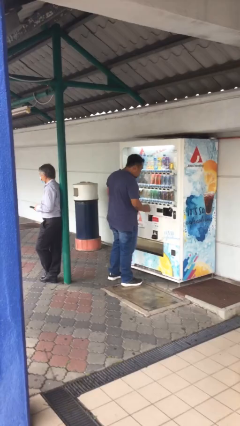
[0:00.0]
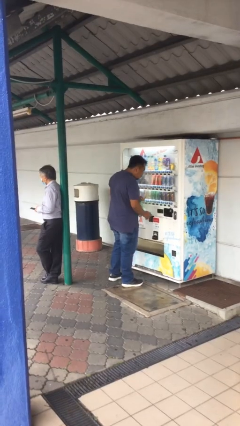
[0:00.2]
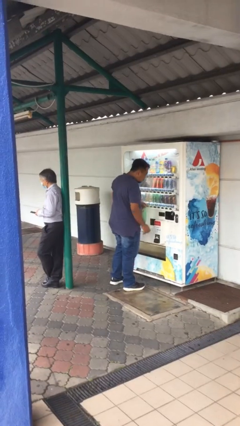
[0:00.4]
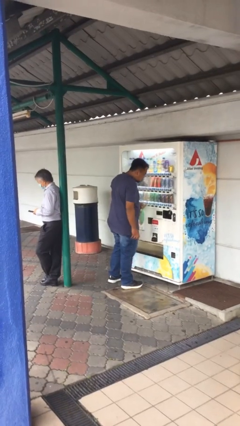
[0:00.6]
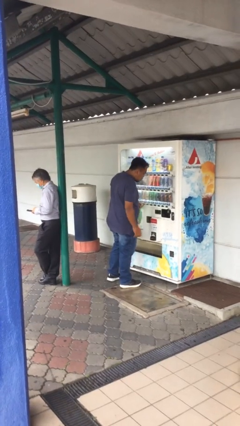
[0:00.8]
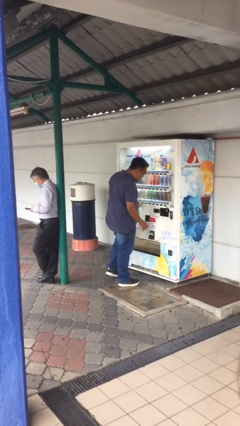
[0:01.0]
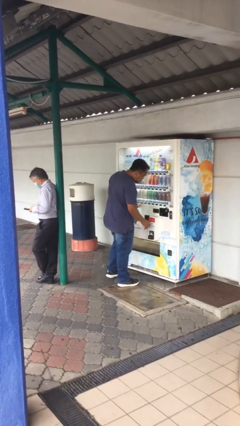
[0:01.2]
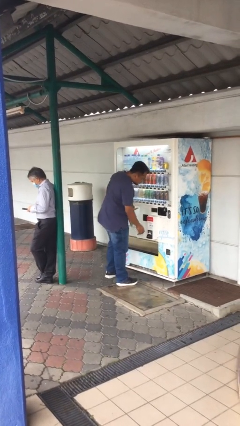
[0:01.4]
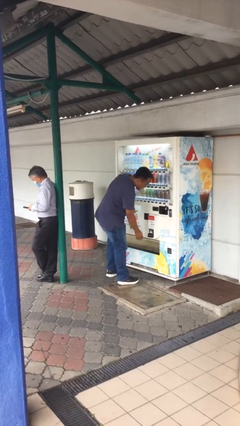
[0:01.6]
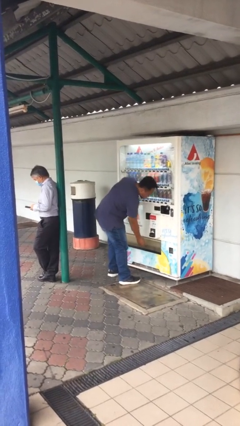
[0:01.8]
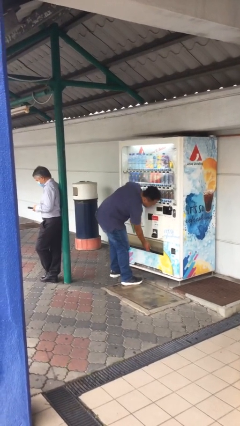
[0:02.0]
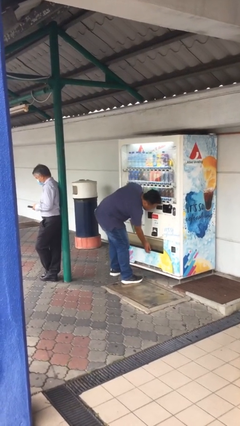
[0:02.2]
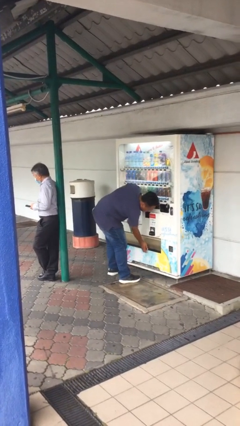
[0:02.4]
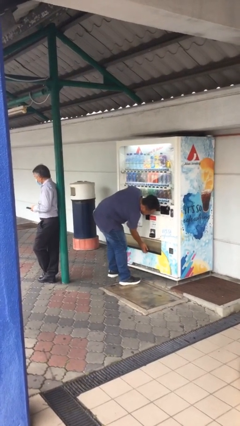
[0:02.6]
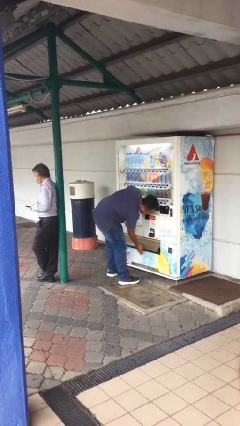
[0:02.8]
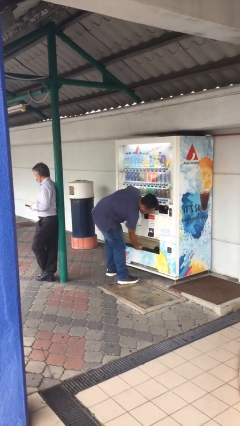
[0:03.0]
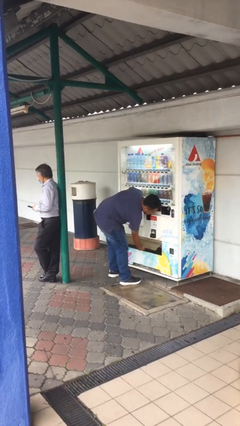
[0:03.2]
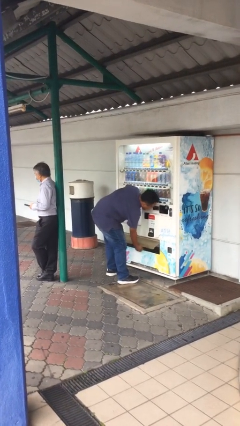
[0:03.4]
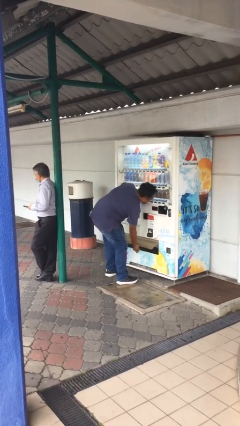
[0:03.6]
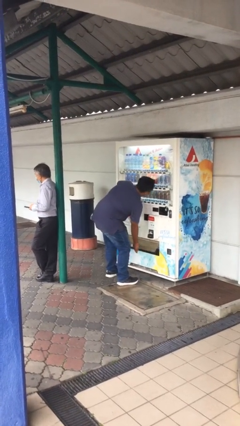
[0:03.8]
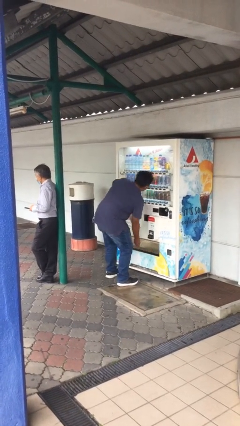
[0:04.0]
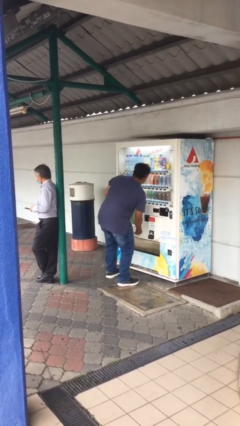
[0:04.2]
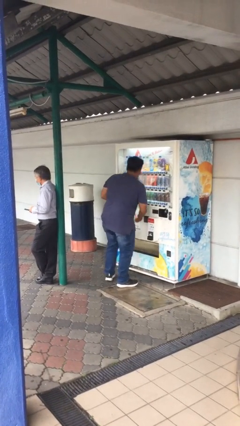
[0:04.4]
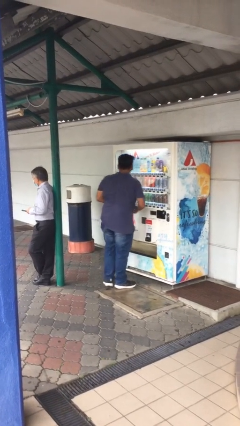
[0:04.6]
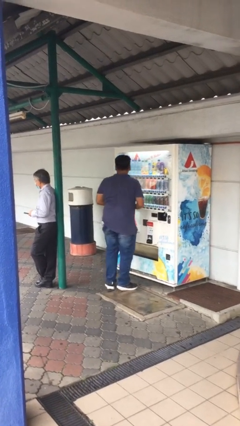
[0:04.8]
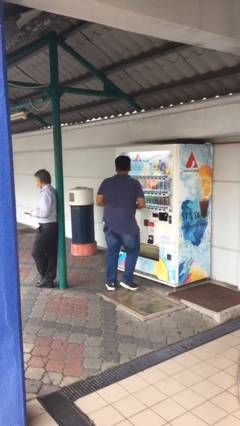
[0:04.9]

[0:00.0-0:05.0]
person purchases from machine

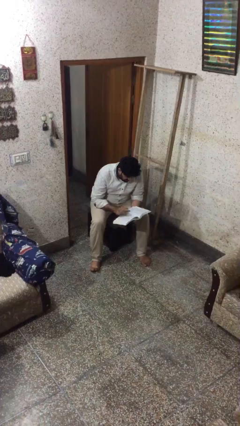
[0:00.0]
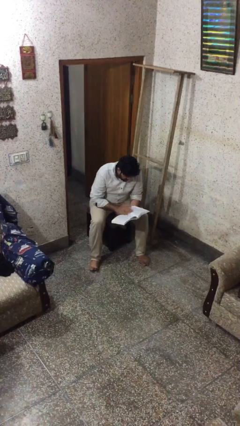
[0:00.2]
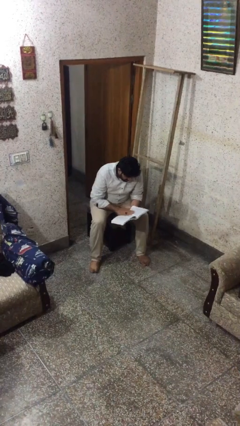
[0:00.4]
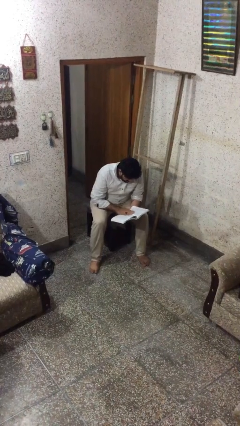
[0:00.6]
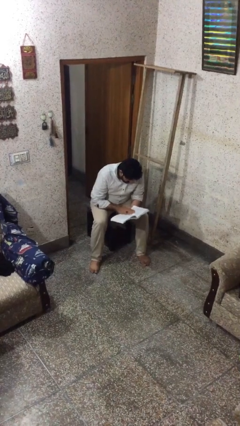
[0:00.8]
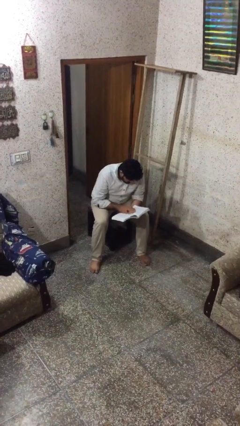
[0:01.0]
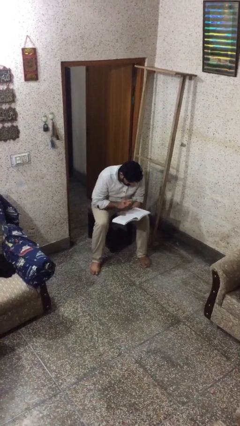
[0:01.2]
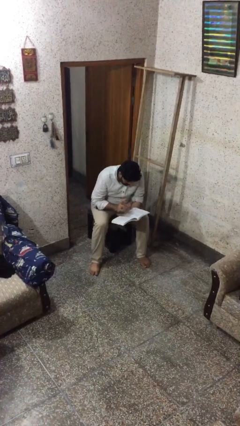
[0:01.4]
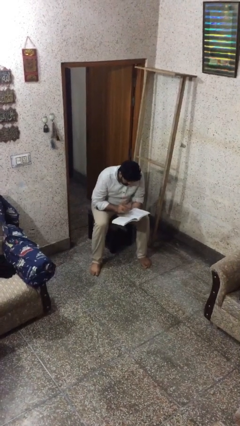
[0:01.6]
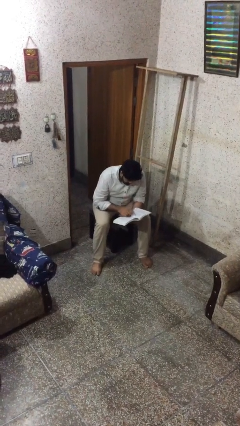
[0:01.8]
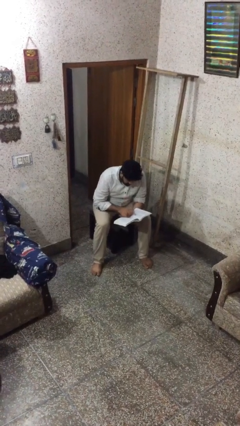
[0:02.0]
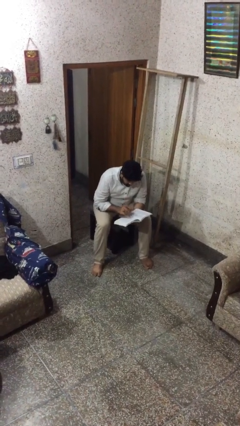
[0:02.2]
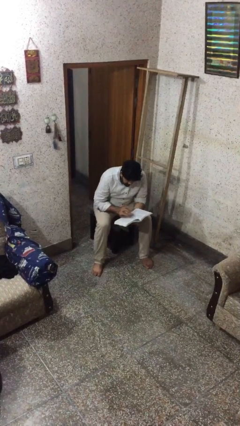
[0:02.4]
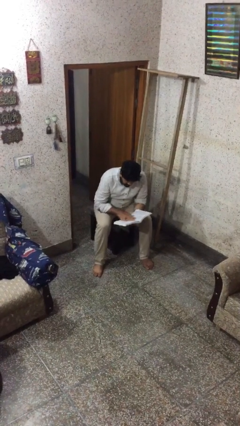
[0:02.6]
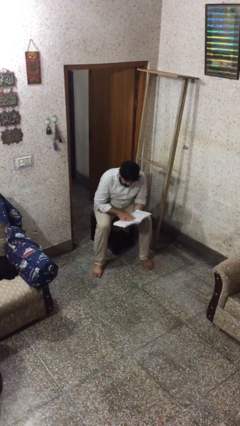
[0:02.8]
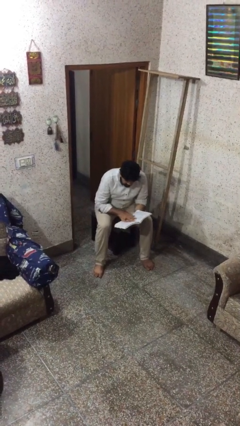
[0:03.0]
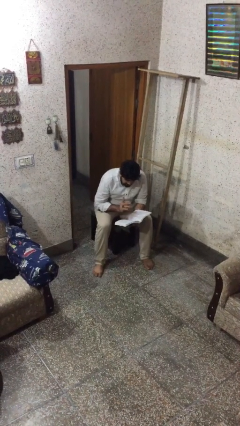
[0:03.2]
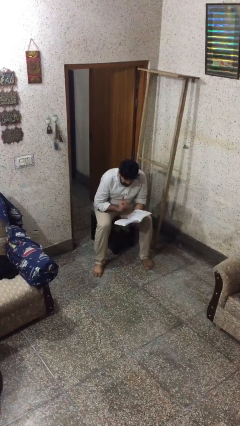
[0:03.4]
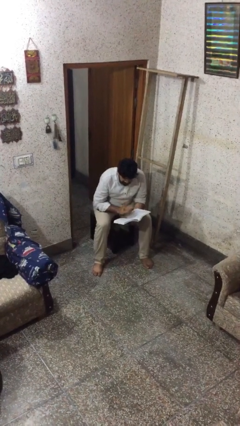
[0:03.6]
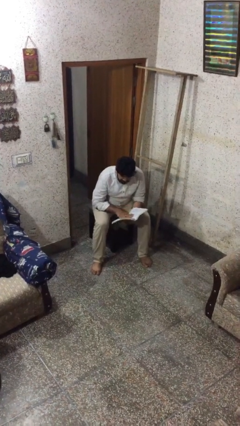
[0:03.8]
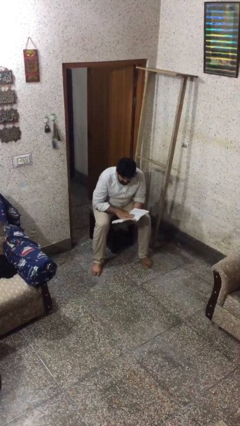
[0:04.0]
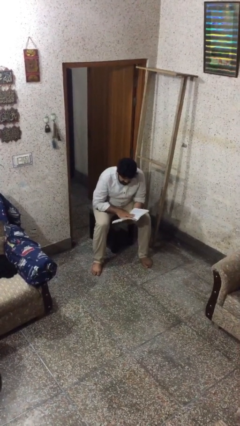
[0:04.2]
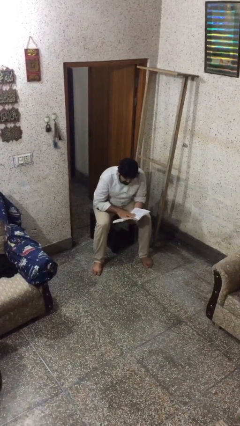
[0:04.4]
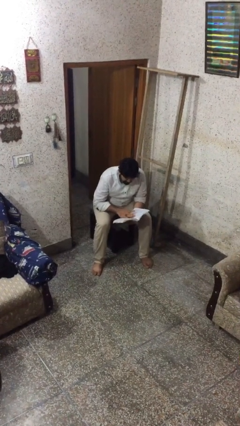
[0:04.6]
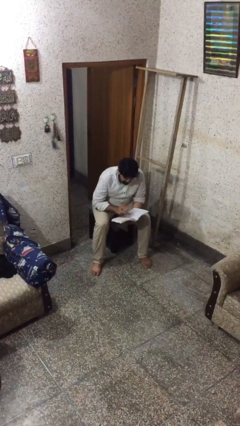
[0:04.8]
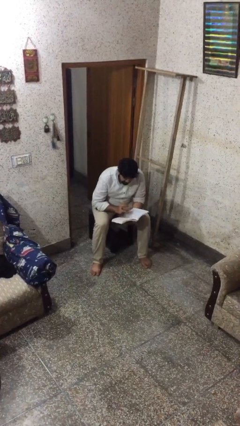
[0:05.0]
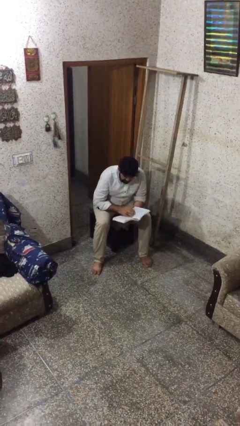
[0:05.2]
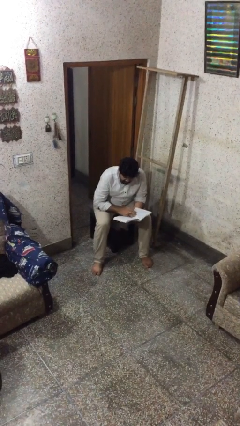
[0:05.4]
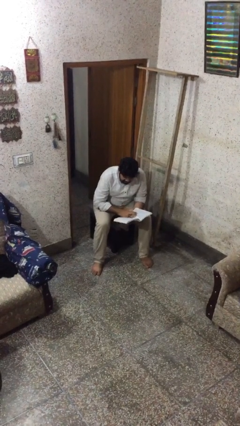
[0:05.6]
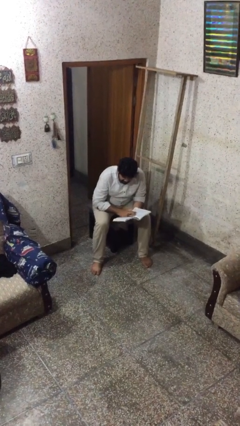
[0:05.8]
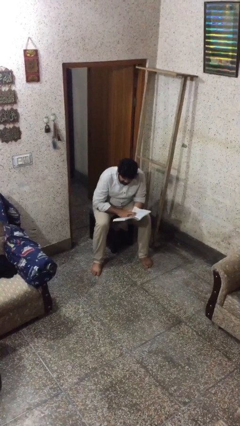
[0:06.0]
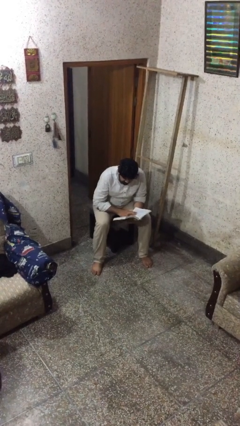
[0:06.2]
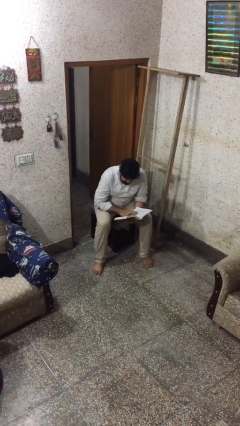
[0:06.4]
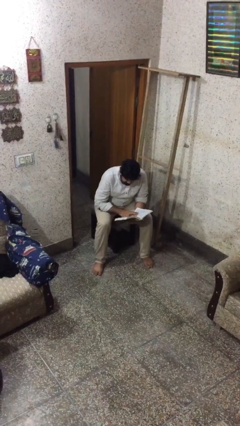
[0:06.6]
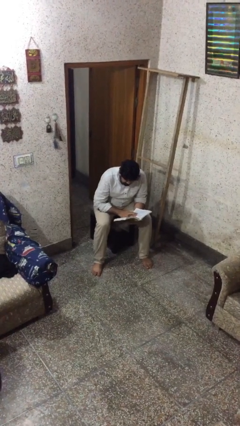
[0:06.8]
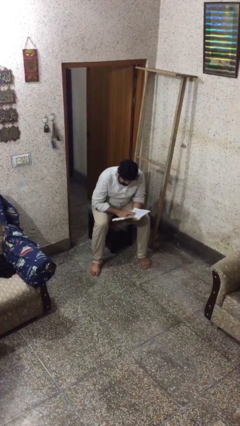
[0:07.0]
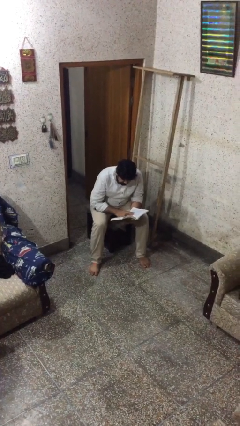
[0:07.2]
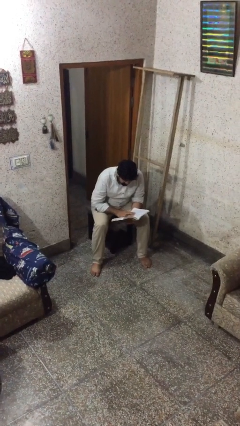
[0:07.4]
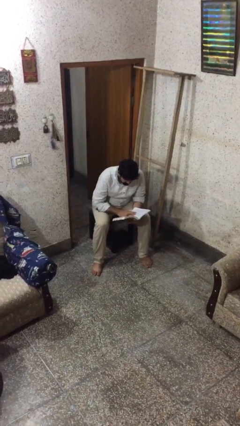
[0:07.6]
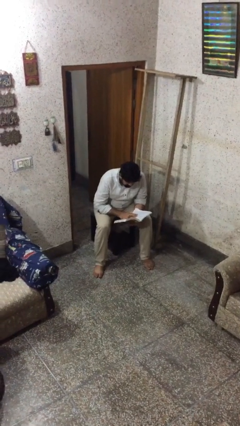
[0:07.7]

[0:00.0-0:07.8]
person reads document

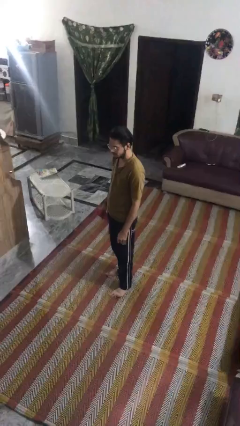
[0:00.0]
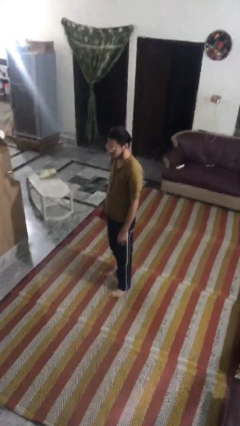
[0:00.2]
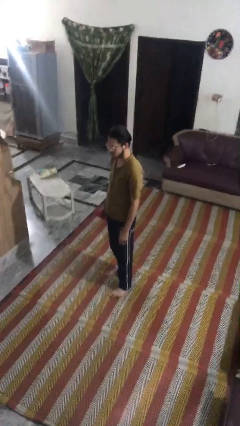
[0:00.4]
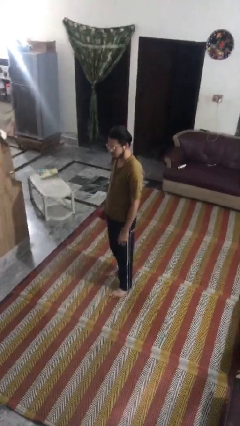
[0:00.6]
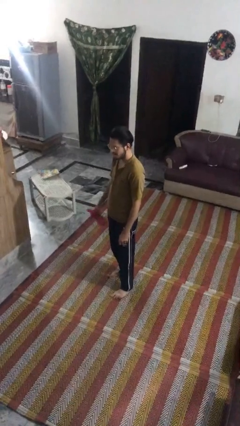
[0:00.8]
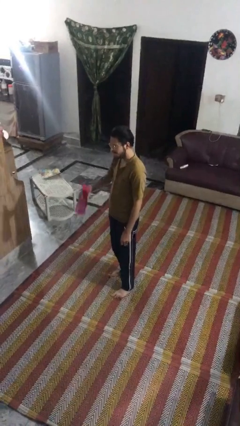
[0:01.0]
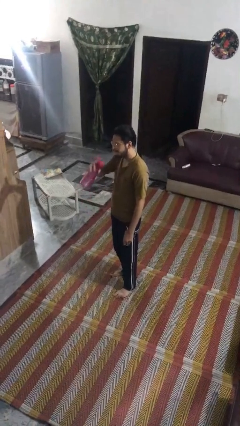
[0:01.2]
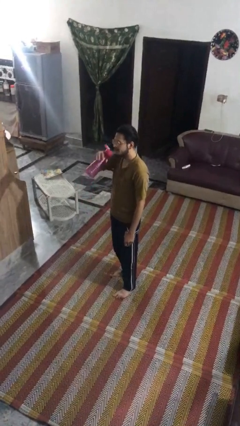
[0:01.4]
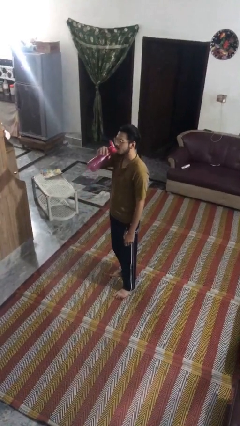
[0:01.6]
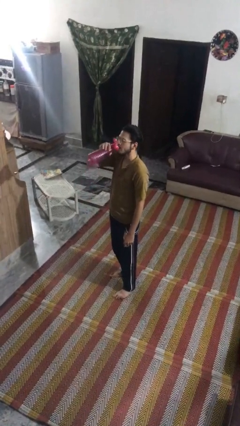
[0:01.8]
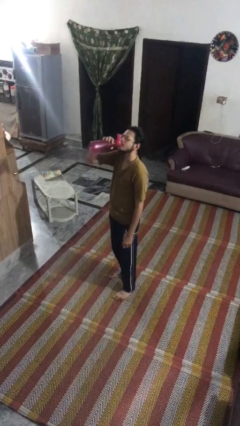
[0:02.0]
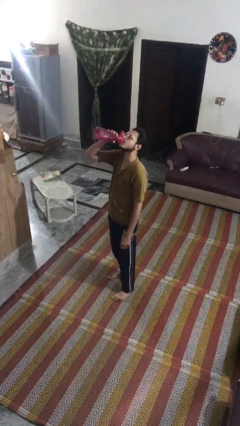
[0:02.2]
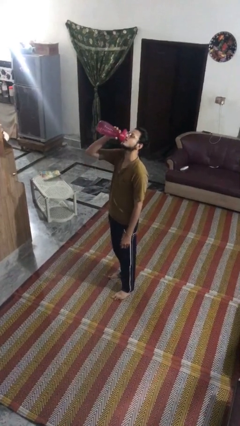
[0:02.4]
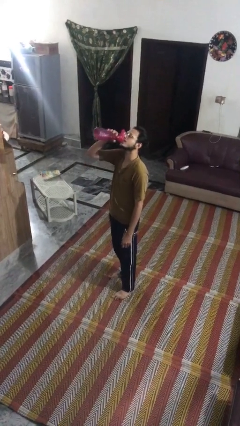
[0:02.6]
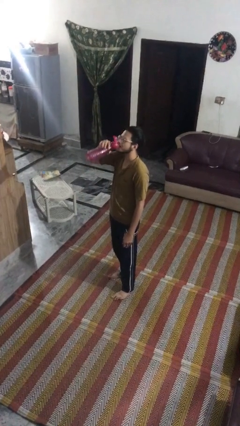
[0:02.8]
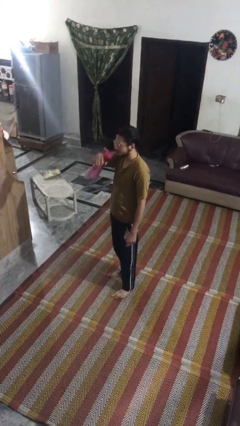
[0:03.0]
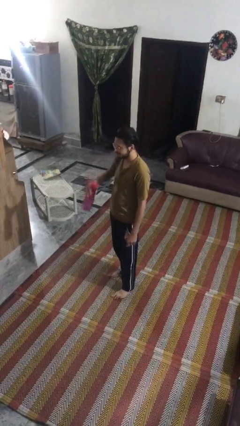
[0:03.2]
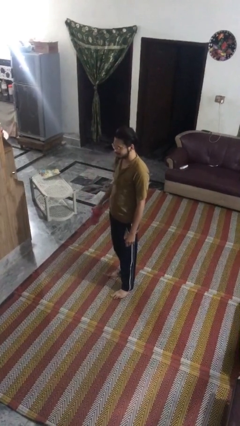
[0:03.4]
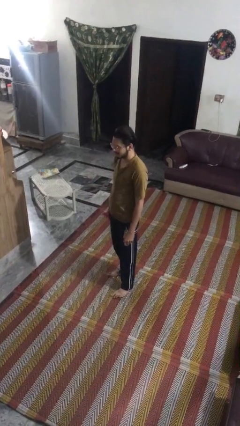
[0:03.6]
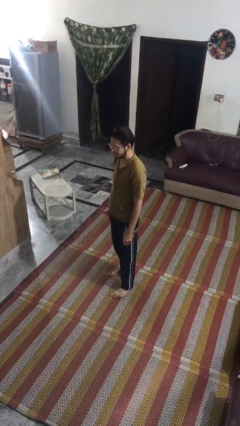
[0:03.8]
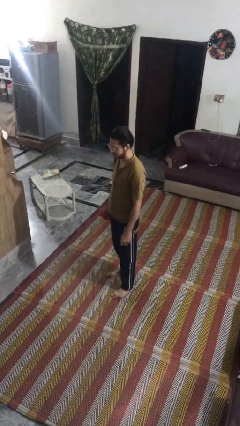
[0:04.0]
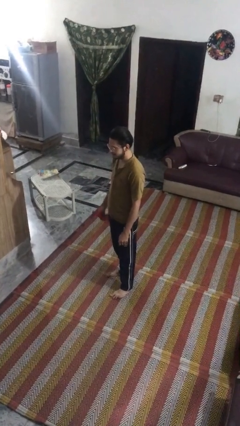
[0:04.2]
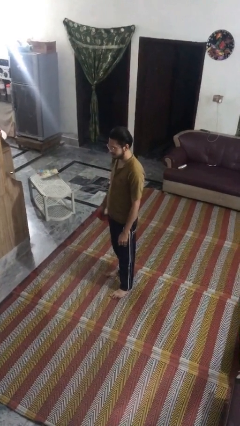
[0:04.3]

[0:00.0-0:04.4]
person drinks from bottle

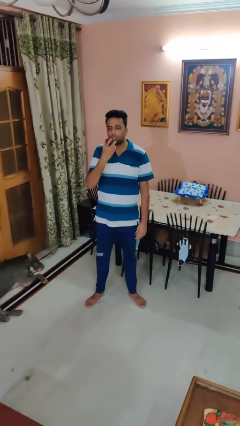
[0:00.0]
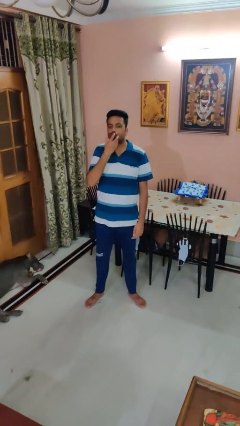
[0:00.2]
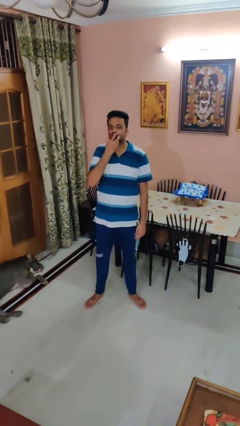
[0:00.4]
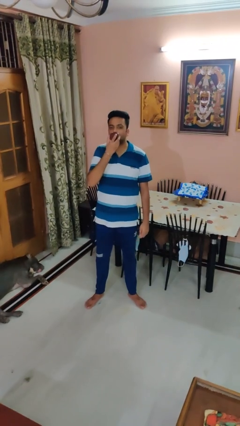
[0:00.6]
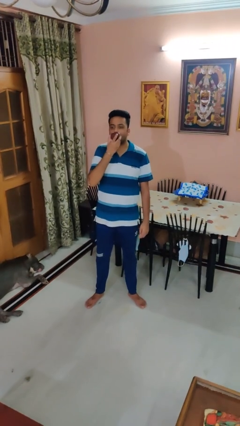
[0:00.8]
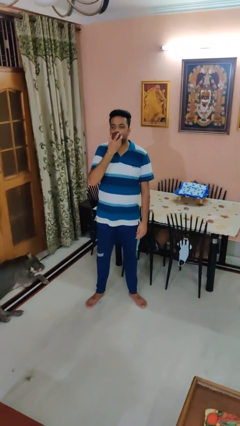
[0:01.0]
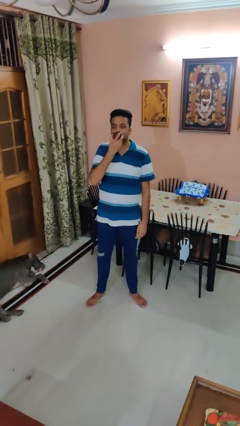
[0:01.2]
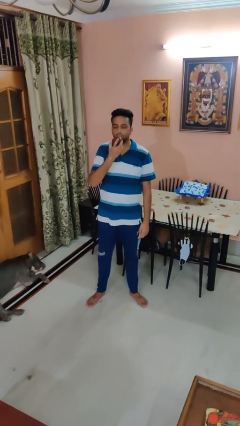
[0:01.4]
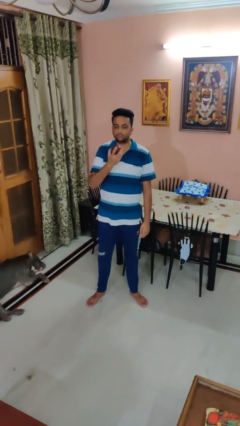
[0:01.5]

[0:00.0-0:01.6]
person eats apple
